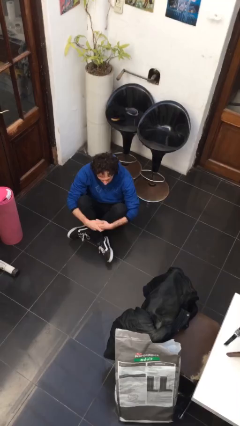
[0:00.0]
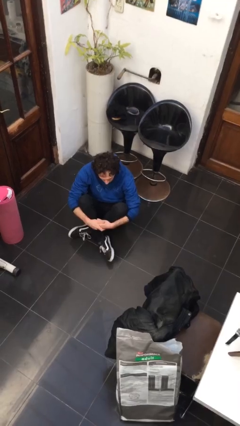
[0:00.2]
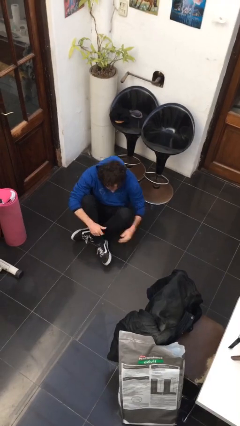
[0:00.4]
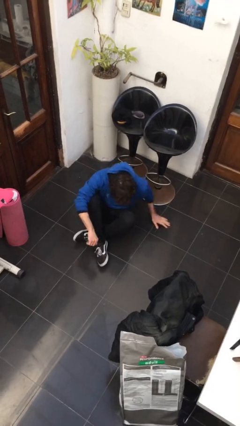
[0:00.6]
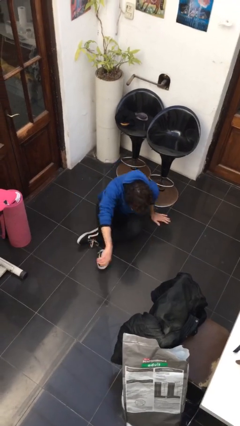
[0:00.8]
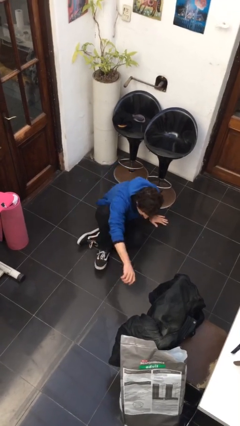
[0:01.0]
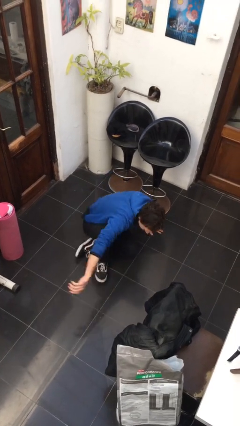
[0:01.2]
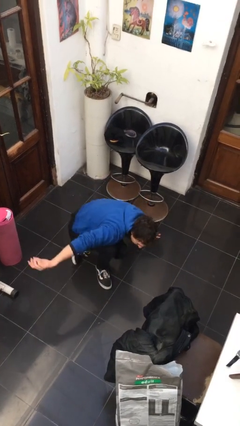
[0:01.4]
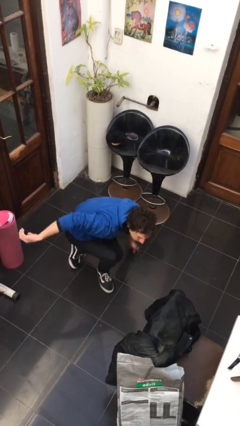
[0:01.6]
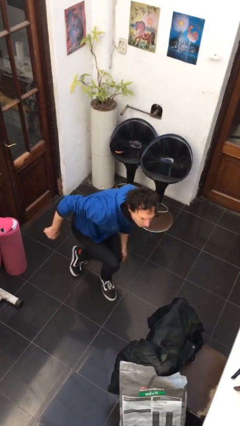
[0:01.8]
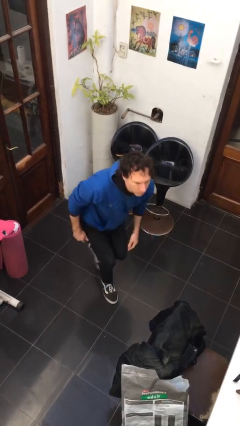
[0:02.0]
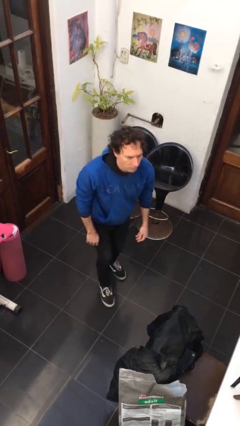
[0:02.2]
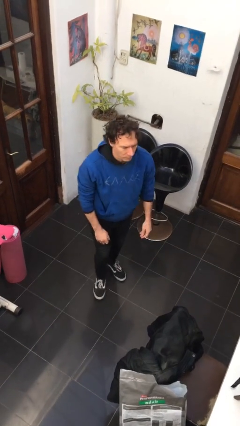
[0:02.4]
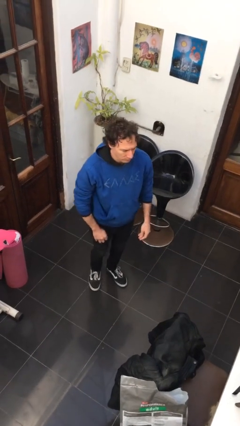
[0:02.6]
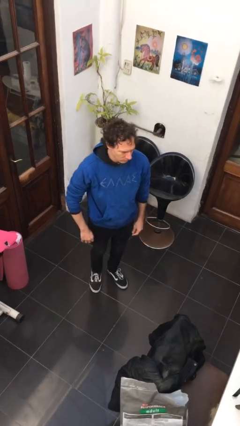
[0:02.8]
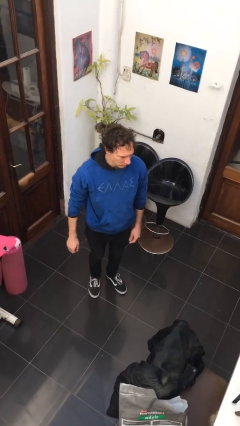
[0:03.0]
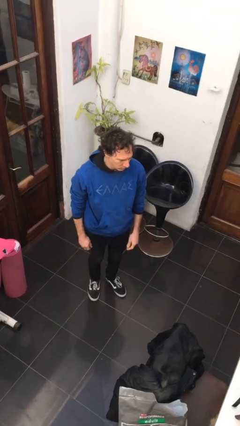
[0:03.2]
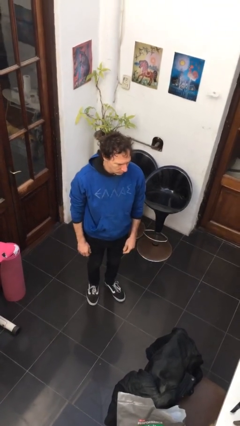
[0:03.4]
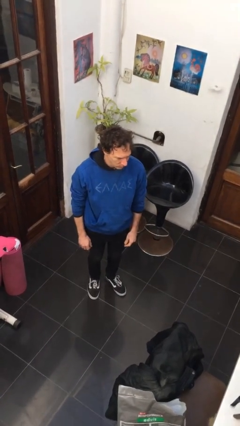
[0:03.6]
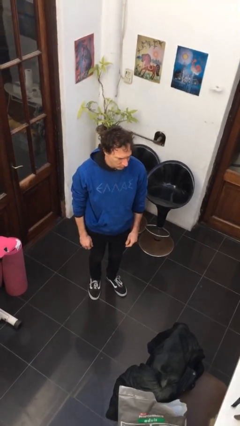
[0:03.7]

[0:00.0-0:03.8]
person stands up from floor

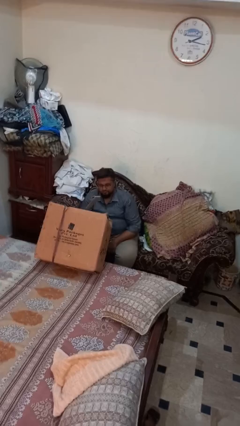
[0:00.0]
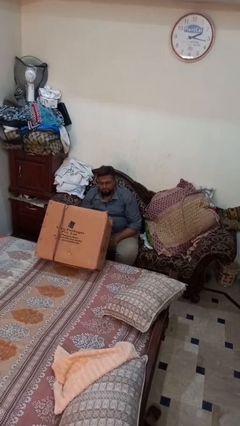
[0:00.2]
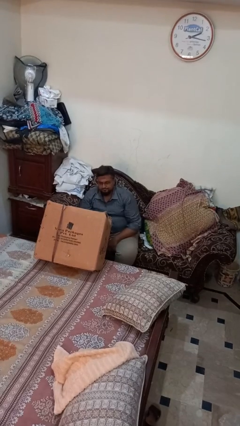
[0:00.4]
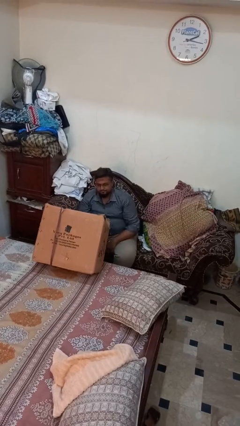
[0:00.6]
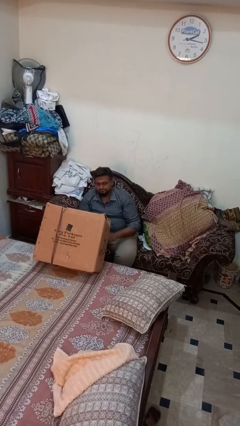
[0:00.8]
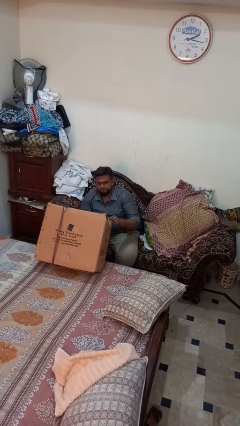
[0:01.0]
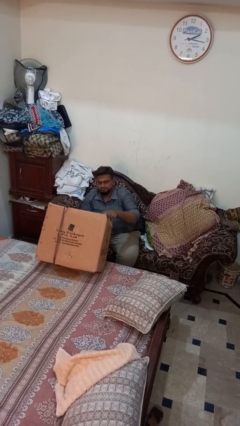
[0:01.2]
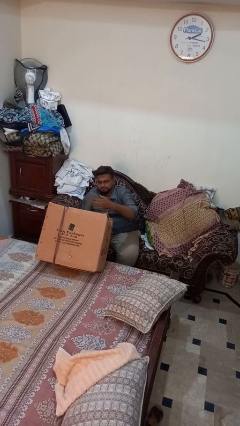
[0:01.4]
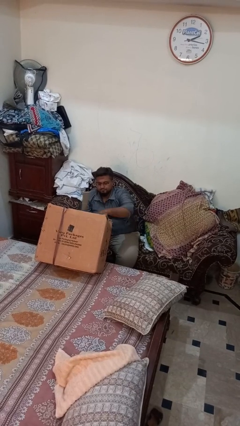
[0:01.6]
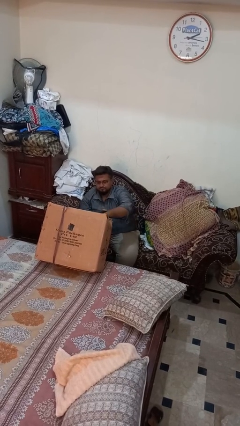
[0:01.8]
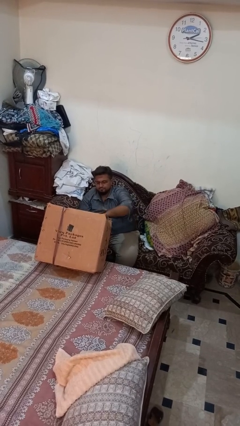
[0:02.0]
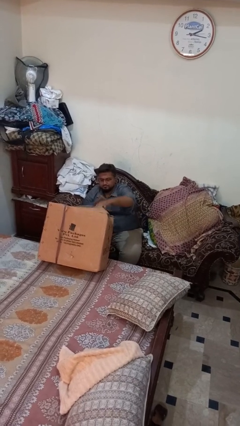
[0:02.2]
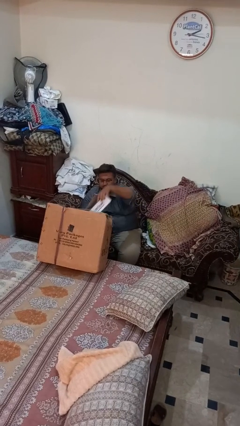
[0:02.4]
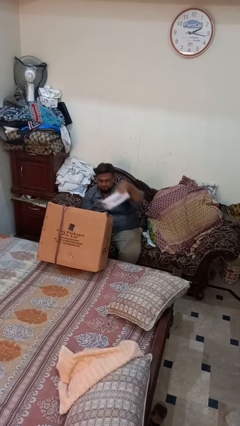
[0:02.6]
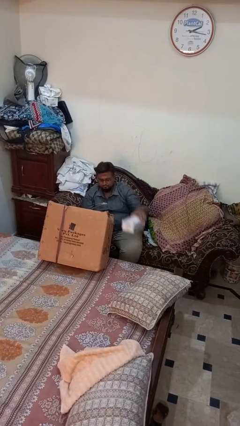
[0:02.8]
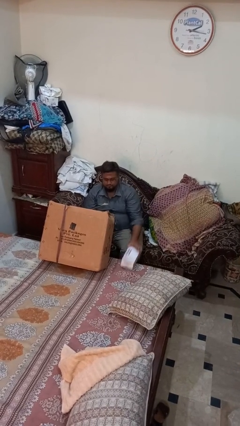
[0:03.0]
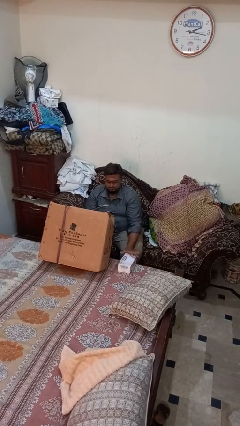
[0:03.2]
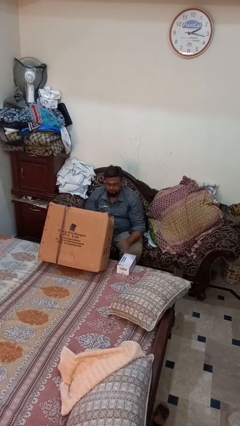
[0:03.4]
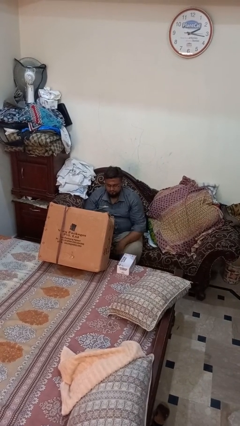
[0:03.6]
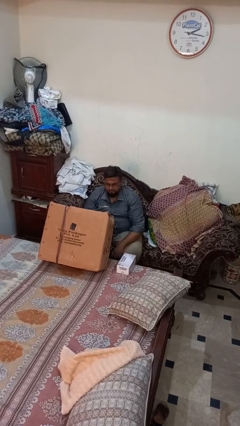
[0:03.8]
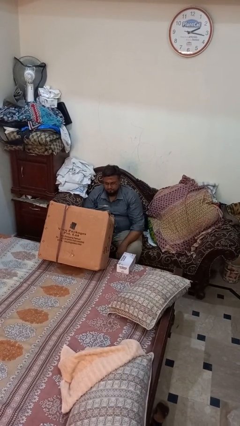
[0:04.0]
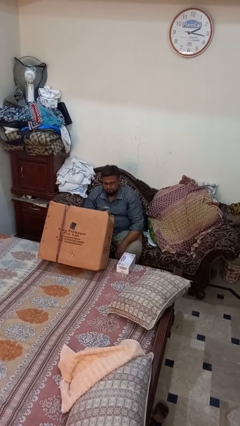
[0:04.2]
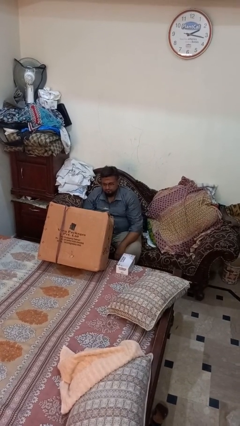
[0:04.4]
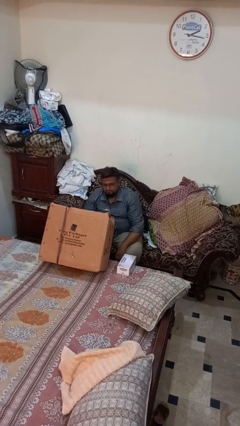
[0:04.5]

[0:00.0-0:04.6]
person takes object from box

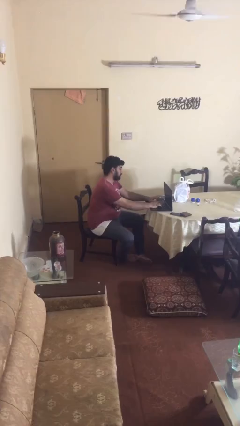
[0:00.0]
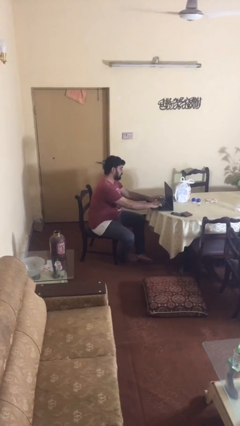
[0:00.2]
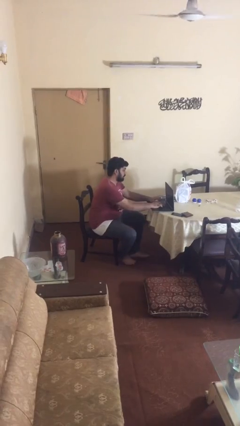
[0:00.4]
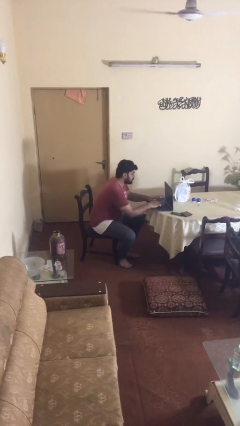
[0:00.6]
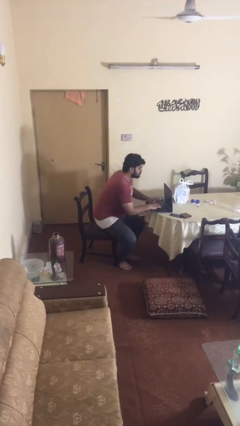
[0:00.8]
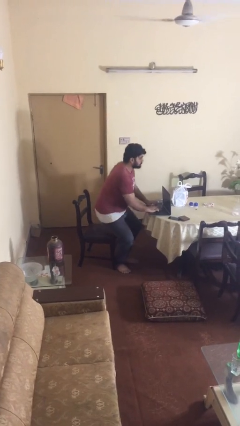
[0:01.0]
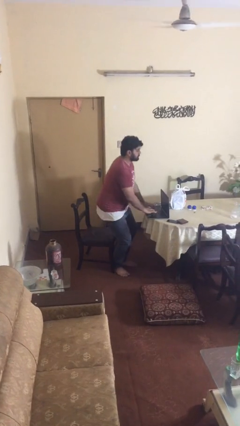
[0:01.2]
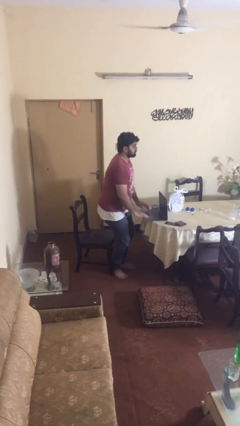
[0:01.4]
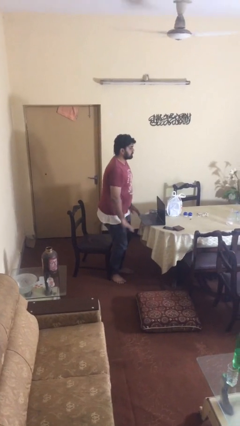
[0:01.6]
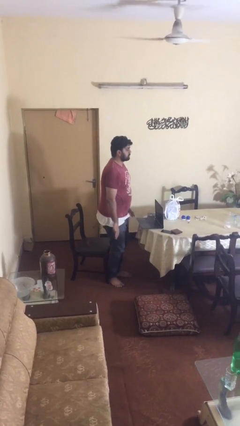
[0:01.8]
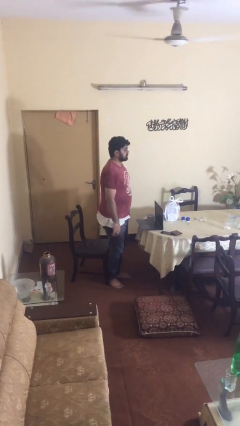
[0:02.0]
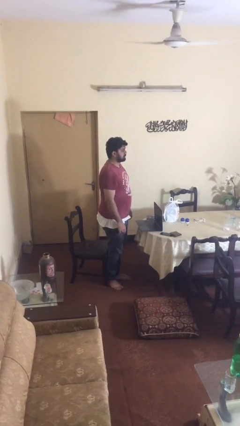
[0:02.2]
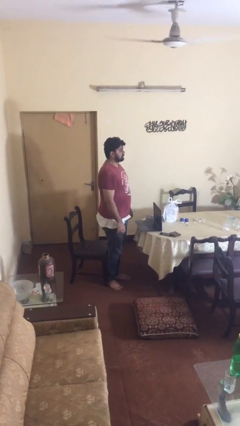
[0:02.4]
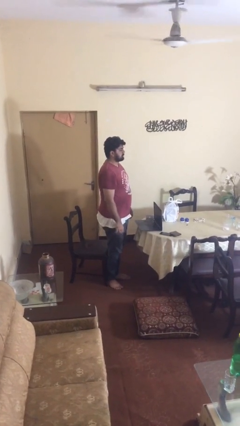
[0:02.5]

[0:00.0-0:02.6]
person stands up

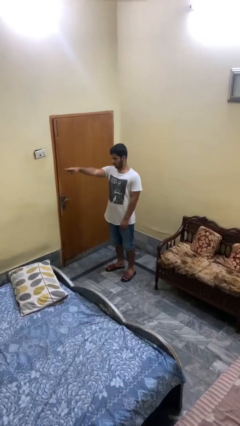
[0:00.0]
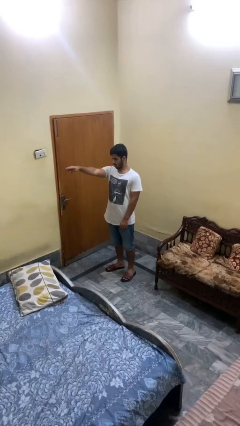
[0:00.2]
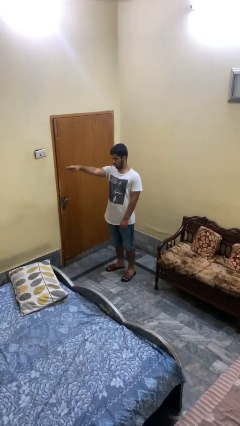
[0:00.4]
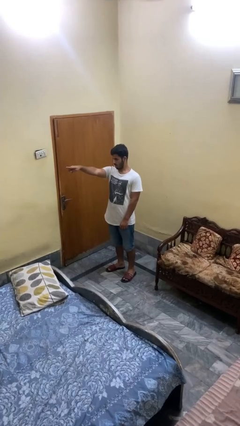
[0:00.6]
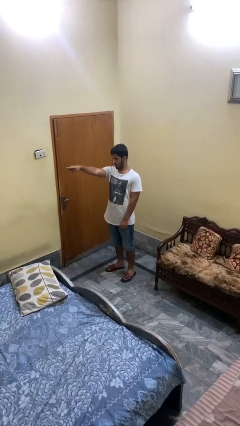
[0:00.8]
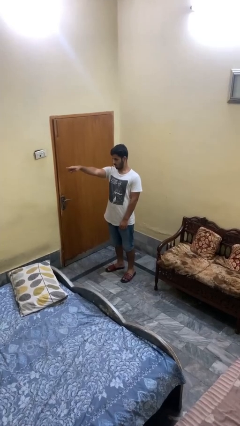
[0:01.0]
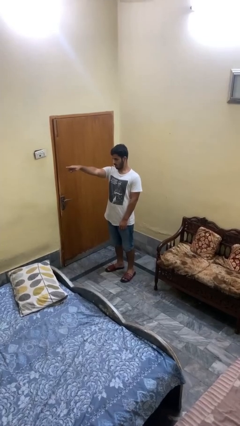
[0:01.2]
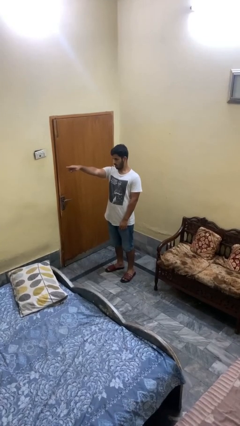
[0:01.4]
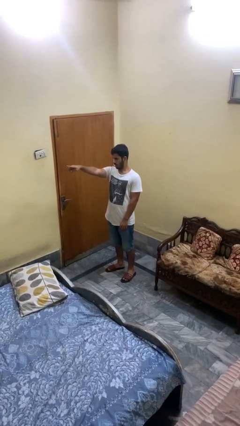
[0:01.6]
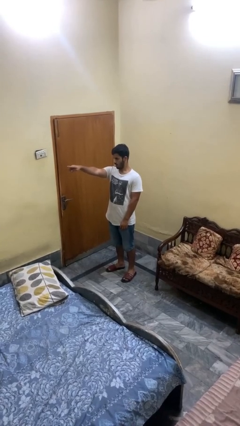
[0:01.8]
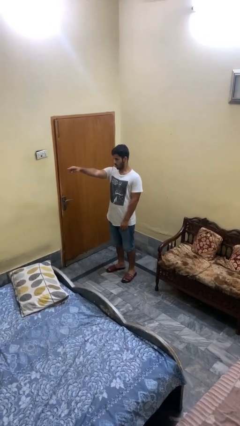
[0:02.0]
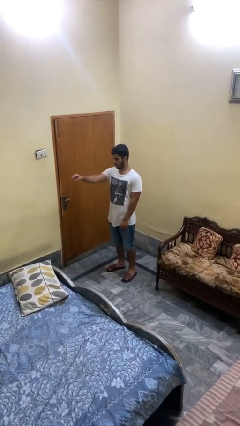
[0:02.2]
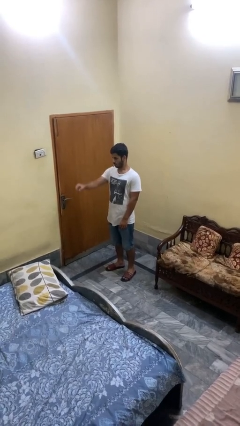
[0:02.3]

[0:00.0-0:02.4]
person points at person

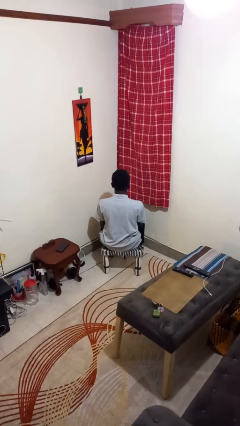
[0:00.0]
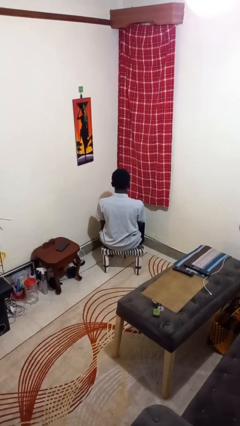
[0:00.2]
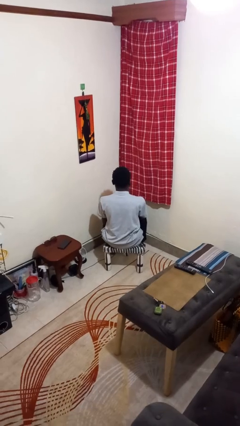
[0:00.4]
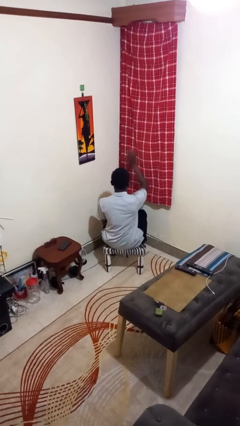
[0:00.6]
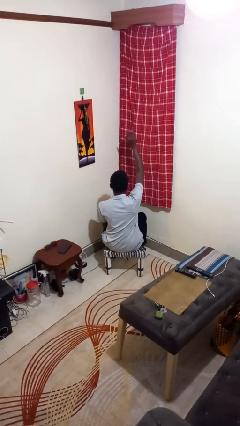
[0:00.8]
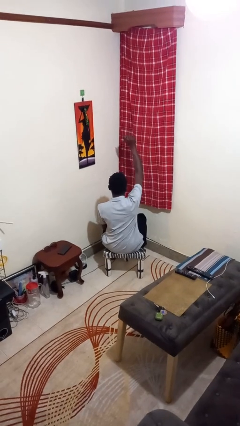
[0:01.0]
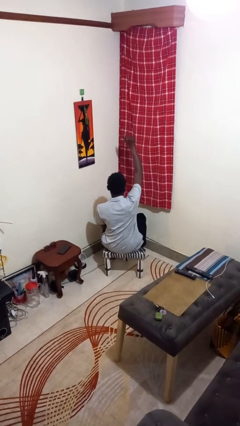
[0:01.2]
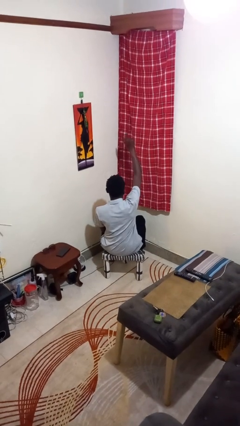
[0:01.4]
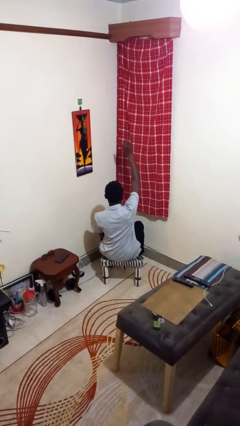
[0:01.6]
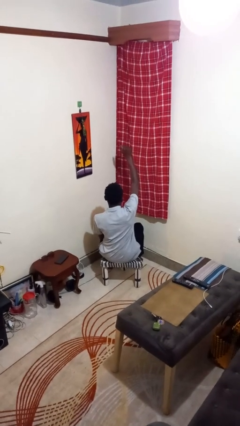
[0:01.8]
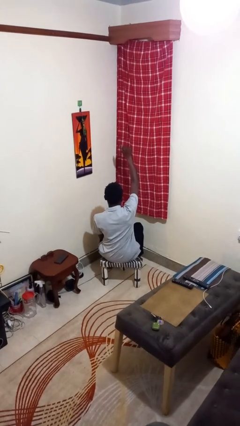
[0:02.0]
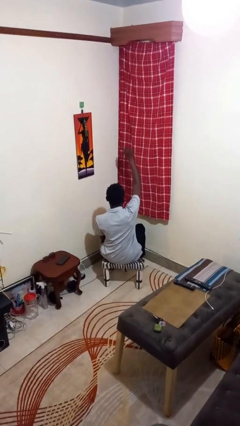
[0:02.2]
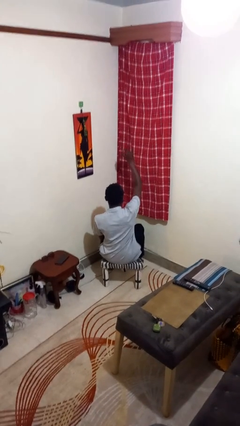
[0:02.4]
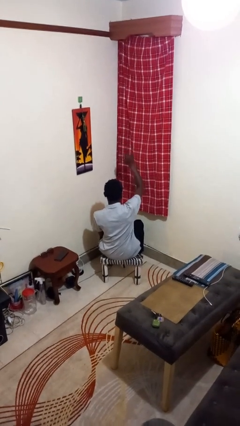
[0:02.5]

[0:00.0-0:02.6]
person gestures come here

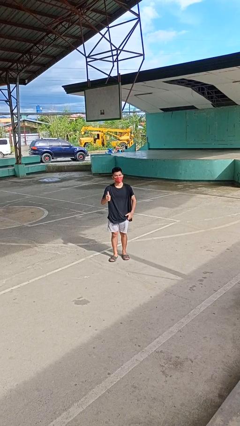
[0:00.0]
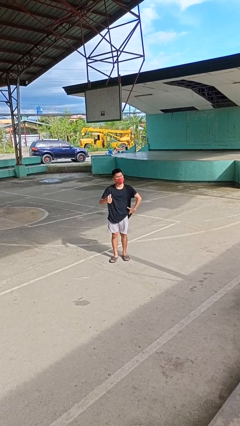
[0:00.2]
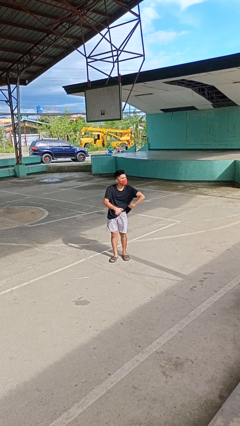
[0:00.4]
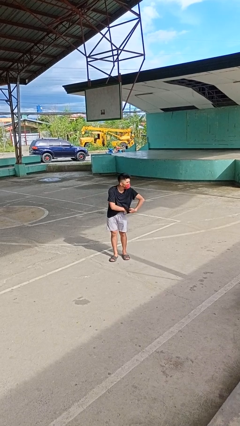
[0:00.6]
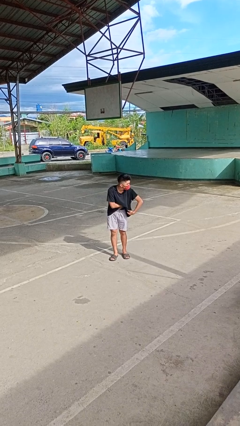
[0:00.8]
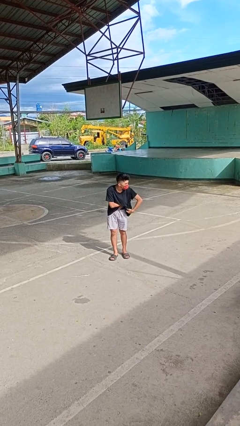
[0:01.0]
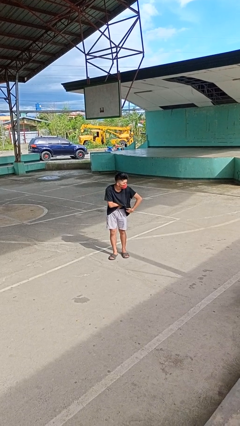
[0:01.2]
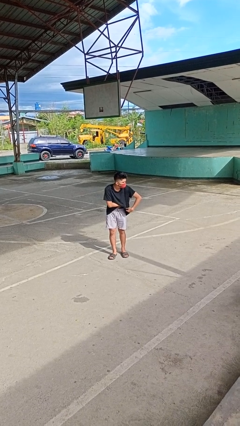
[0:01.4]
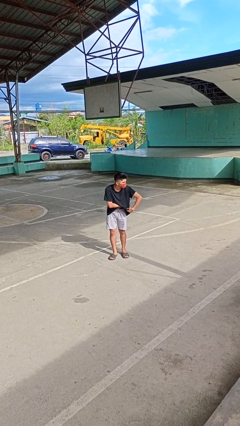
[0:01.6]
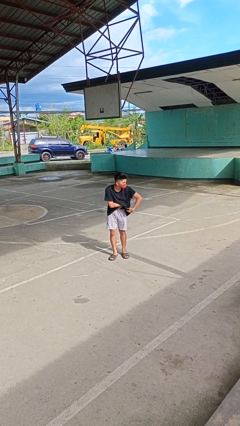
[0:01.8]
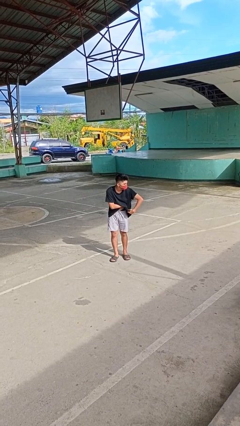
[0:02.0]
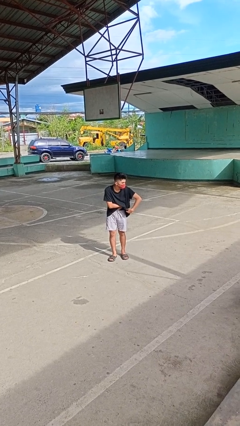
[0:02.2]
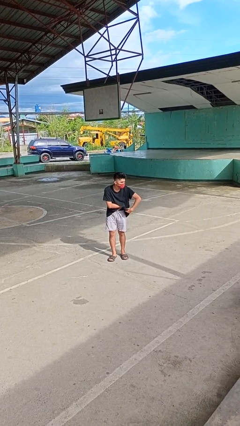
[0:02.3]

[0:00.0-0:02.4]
person applies deodorant
